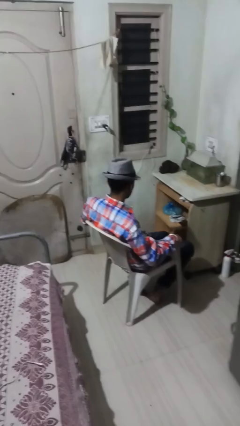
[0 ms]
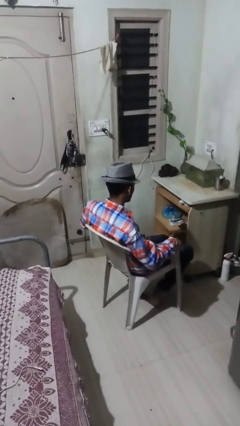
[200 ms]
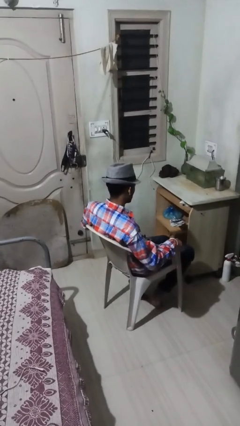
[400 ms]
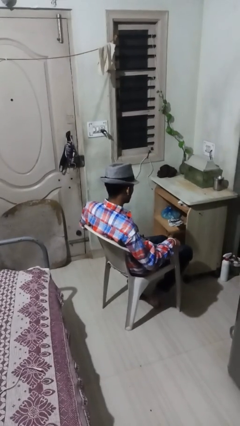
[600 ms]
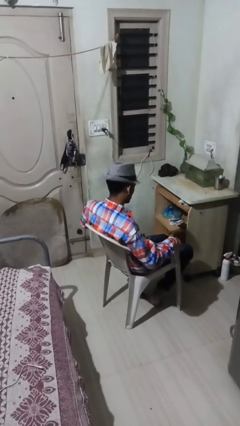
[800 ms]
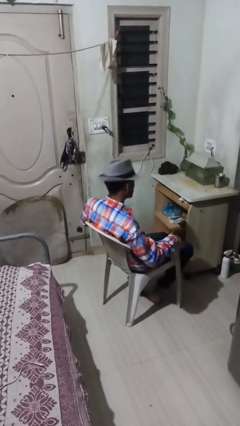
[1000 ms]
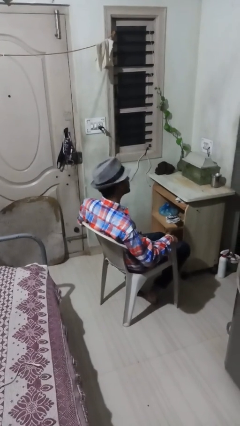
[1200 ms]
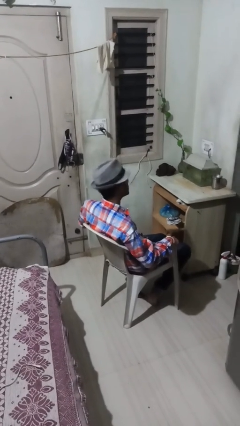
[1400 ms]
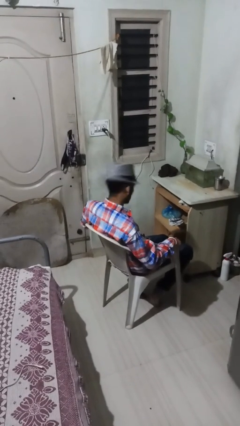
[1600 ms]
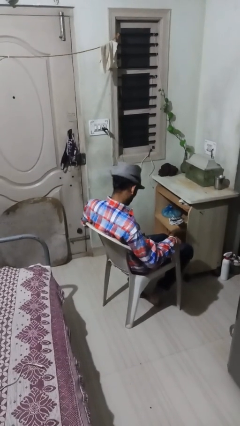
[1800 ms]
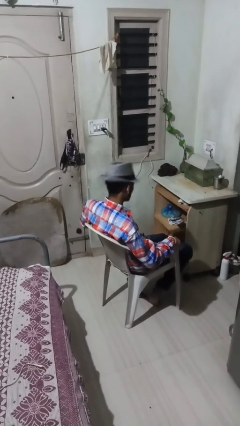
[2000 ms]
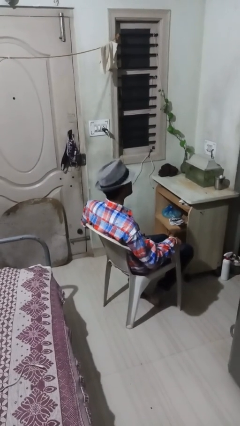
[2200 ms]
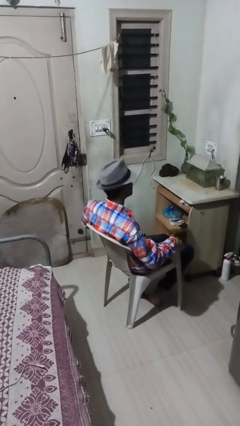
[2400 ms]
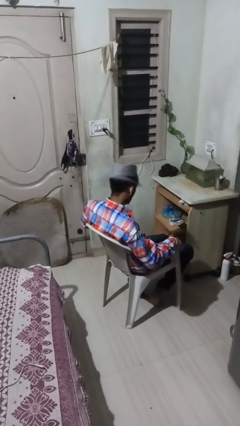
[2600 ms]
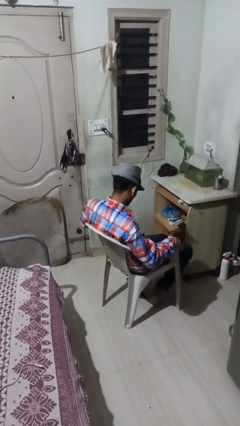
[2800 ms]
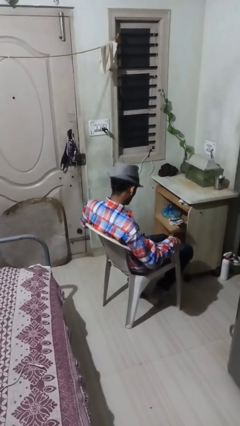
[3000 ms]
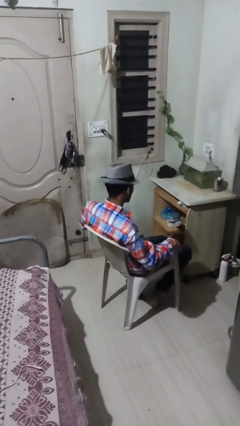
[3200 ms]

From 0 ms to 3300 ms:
person nods head

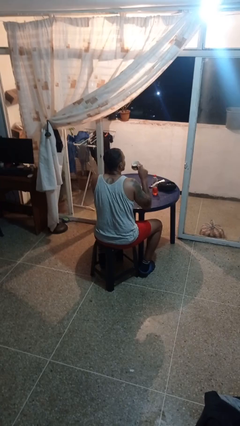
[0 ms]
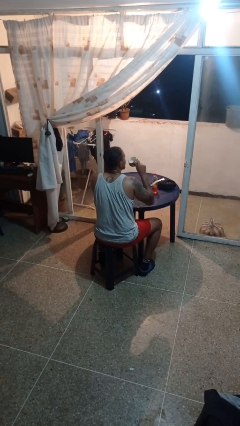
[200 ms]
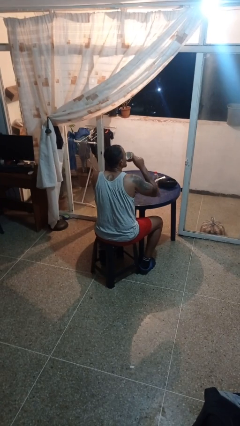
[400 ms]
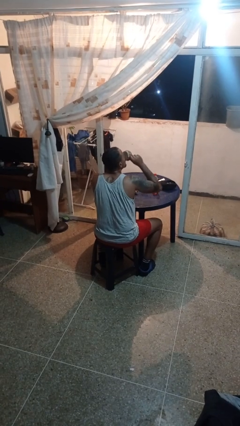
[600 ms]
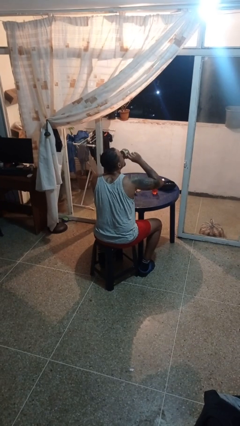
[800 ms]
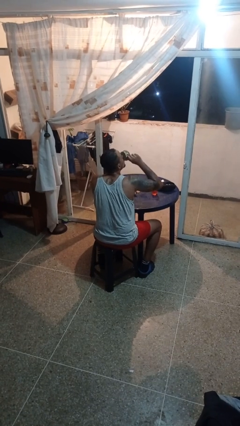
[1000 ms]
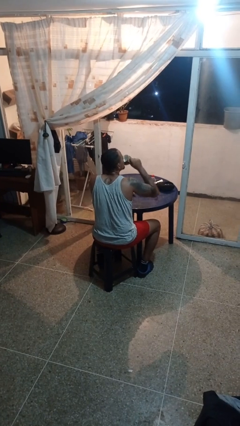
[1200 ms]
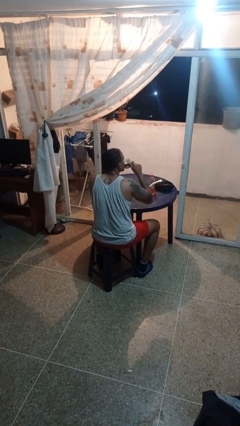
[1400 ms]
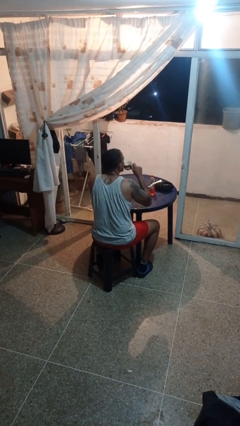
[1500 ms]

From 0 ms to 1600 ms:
person drinks from mug

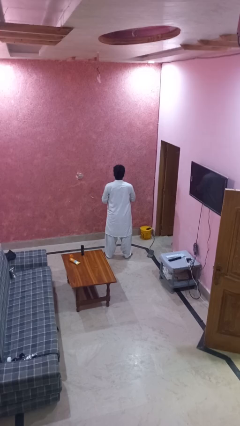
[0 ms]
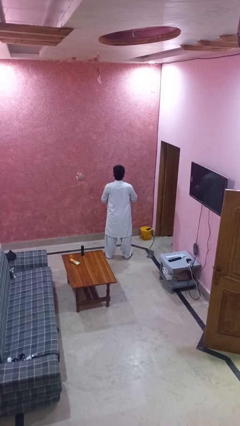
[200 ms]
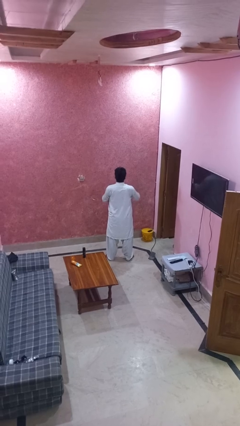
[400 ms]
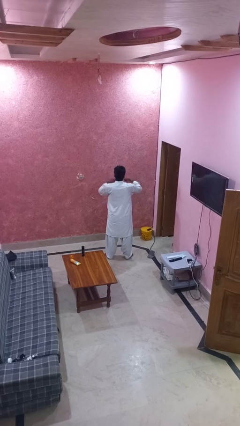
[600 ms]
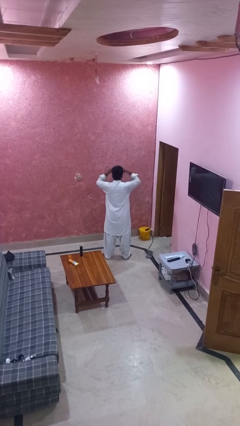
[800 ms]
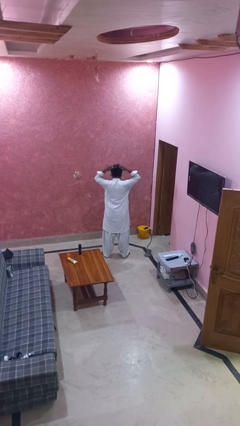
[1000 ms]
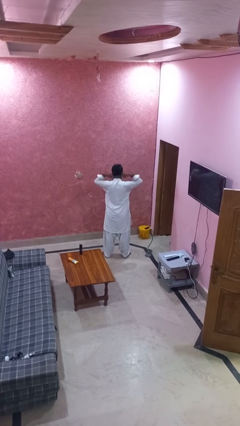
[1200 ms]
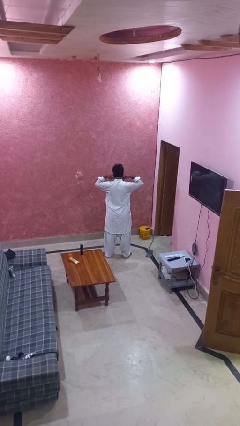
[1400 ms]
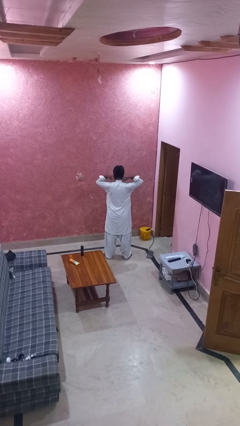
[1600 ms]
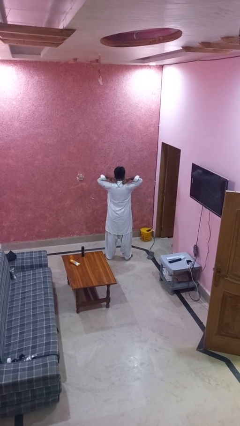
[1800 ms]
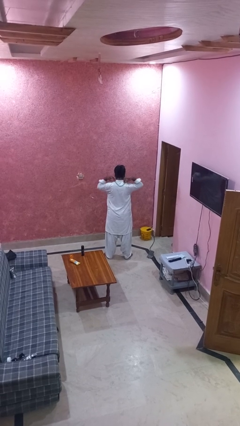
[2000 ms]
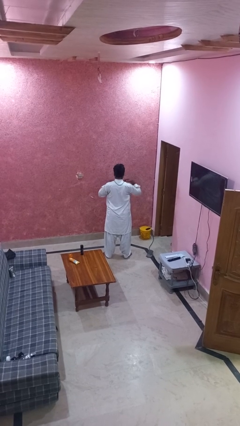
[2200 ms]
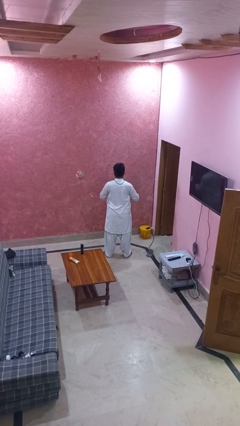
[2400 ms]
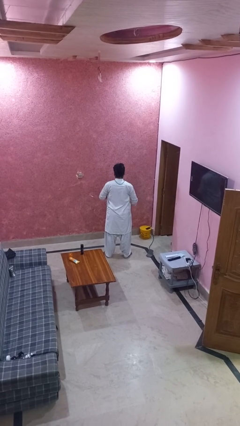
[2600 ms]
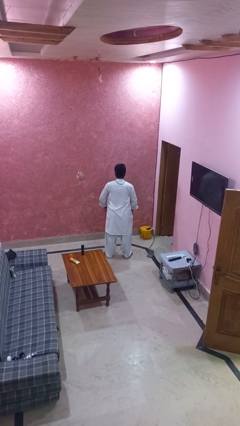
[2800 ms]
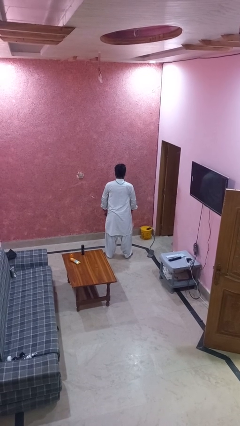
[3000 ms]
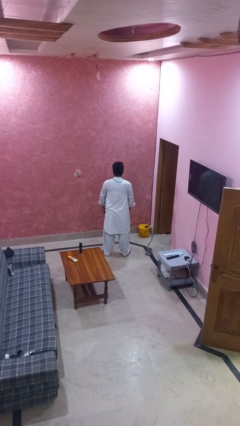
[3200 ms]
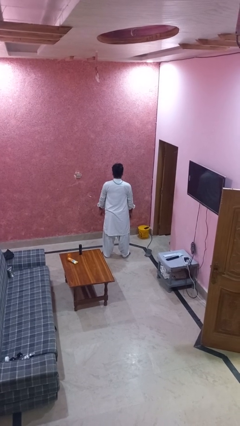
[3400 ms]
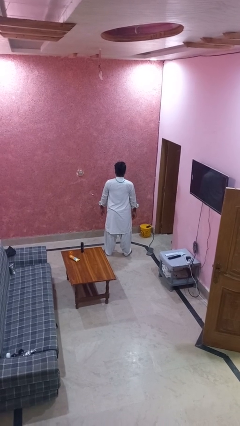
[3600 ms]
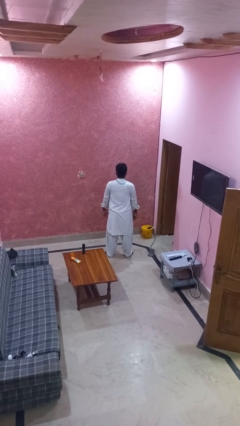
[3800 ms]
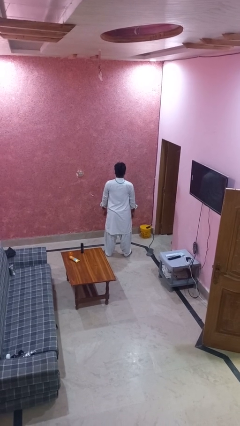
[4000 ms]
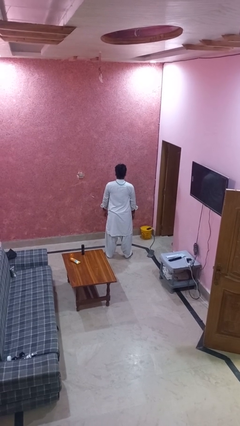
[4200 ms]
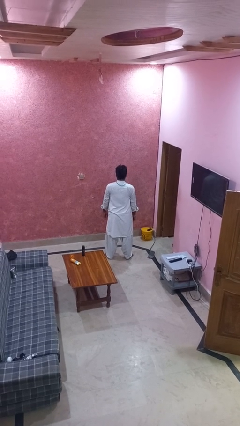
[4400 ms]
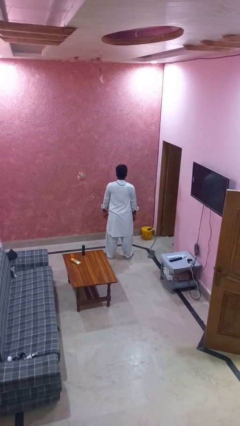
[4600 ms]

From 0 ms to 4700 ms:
person puts on necklace

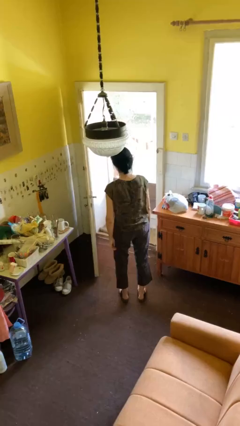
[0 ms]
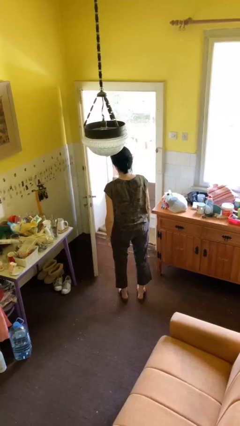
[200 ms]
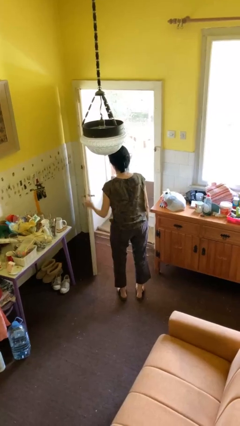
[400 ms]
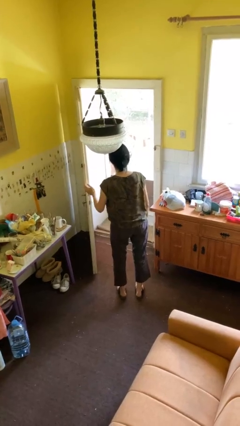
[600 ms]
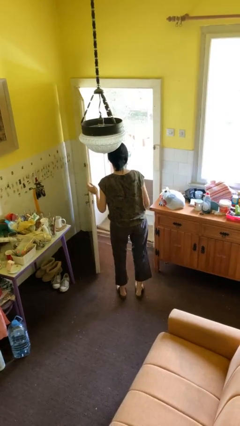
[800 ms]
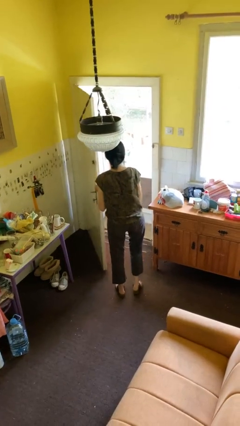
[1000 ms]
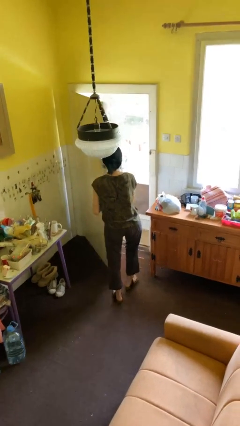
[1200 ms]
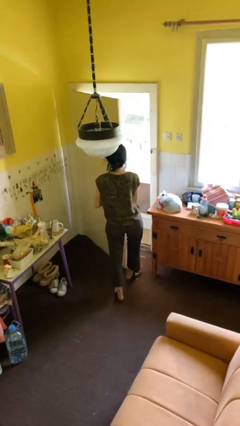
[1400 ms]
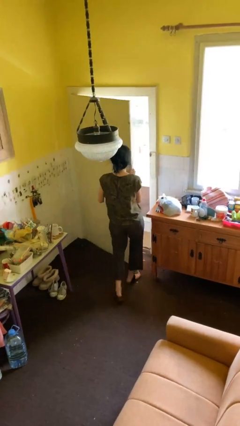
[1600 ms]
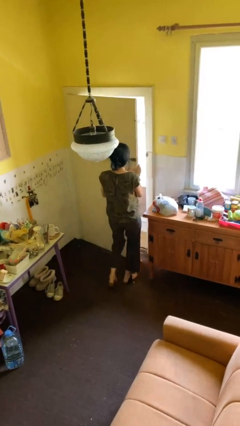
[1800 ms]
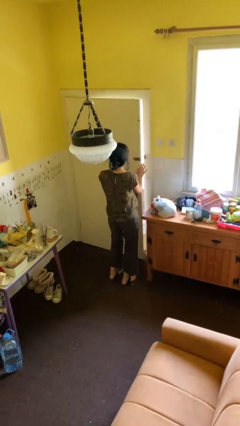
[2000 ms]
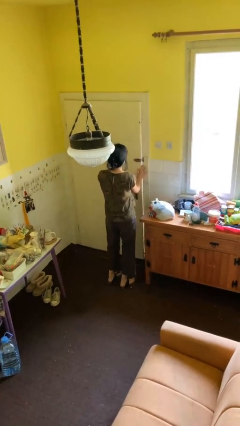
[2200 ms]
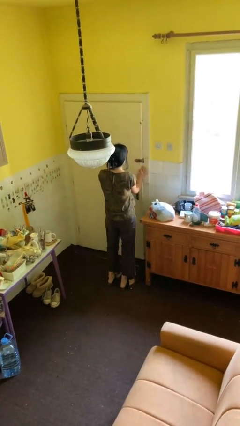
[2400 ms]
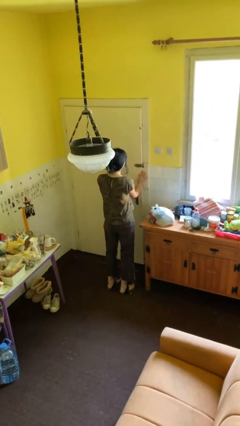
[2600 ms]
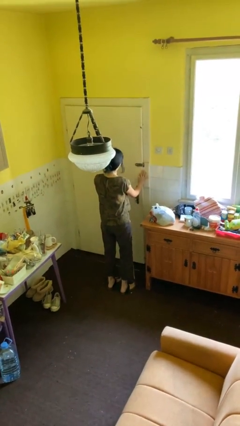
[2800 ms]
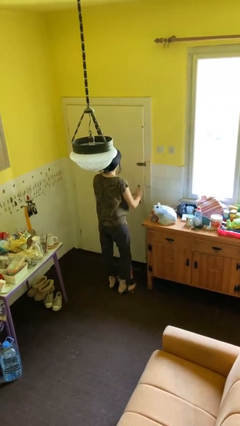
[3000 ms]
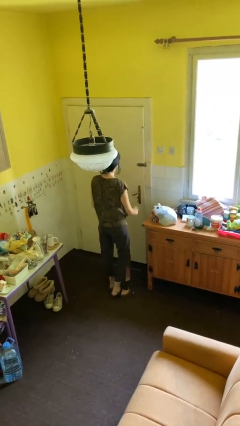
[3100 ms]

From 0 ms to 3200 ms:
person closes facility door

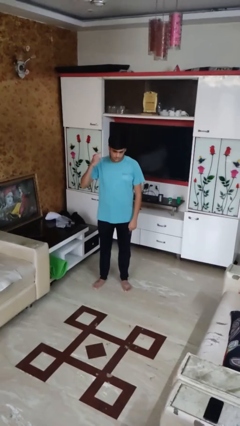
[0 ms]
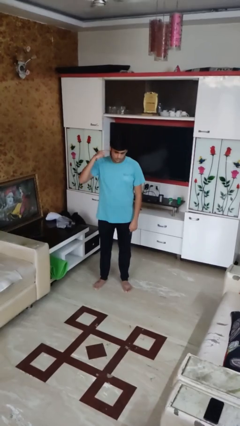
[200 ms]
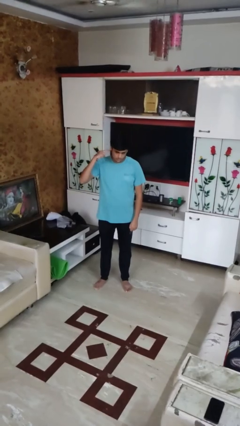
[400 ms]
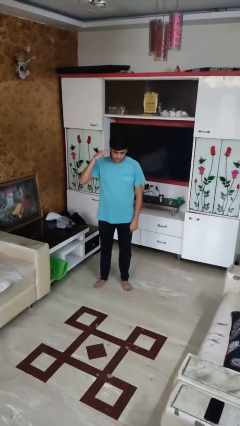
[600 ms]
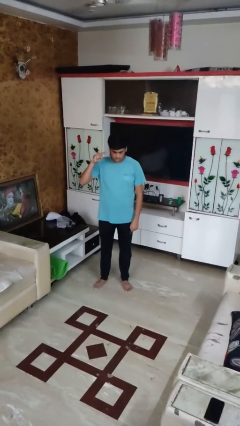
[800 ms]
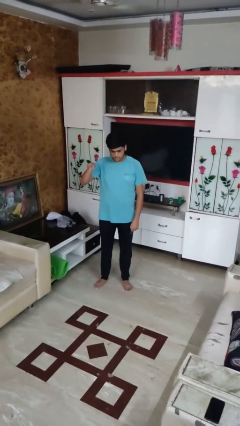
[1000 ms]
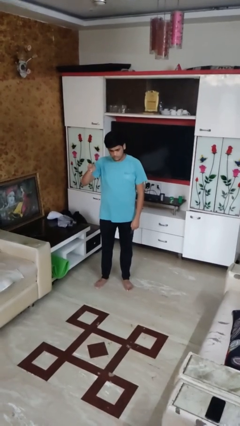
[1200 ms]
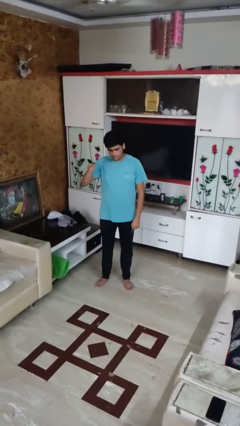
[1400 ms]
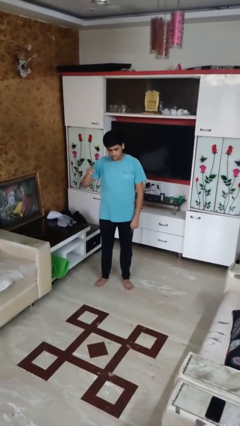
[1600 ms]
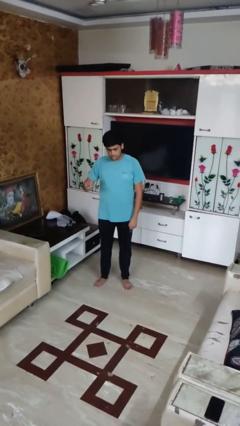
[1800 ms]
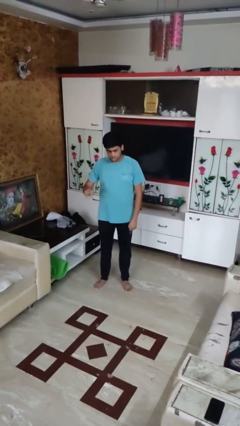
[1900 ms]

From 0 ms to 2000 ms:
person gestures listen closely

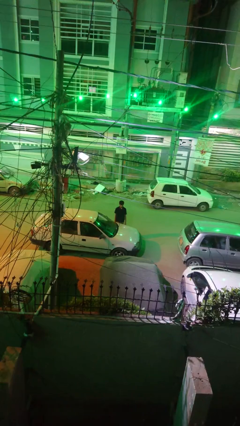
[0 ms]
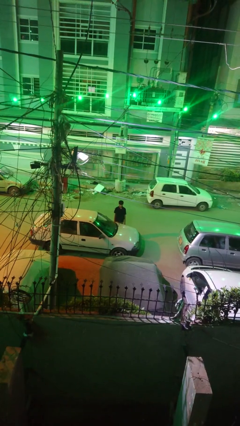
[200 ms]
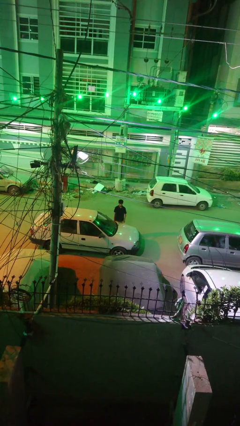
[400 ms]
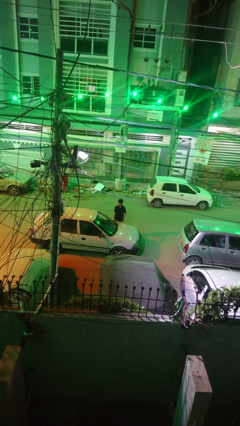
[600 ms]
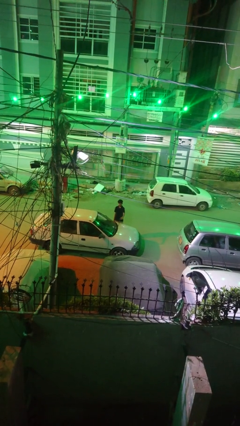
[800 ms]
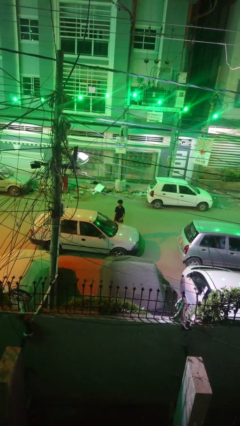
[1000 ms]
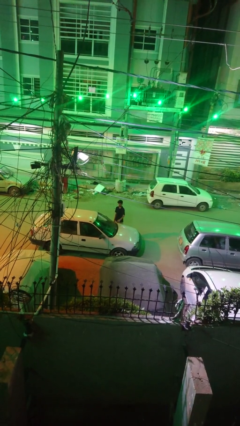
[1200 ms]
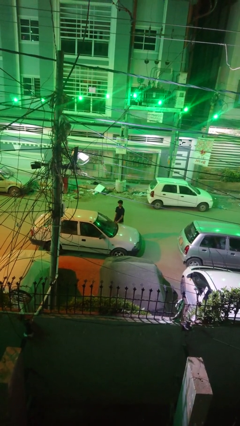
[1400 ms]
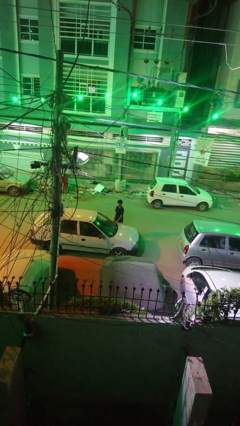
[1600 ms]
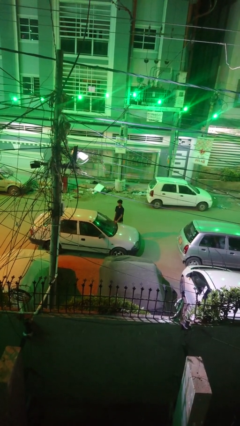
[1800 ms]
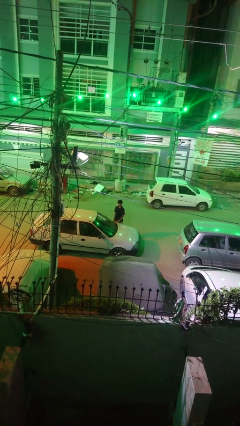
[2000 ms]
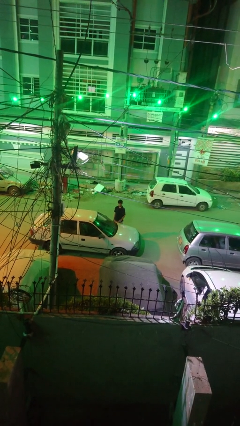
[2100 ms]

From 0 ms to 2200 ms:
person flips down car wipers

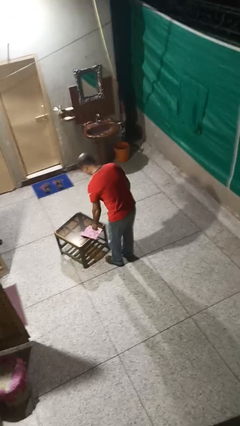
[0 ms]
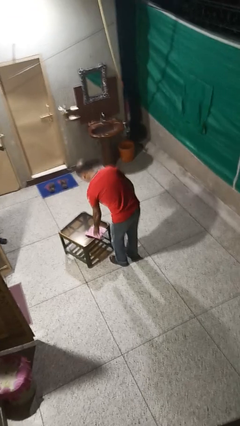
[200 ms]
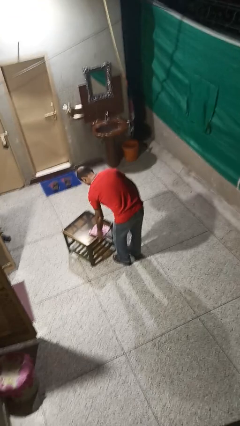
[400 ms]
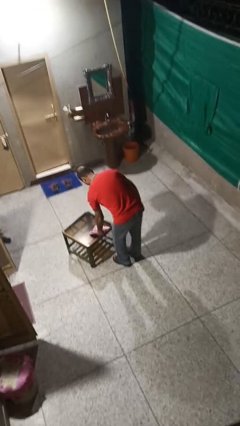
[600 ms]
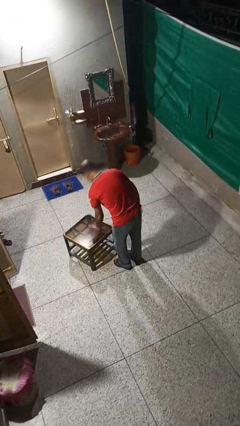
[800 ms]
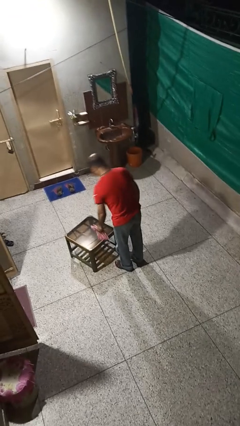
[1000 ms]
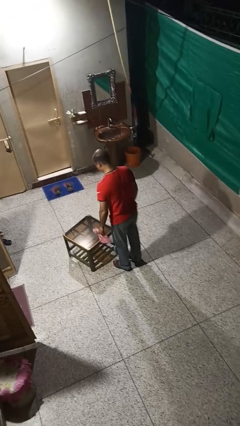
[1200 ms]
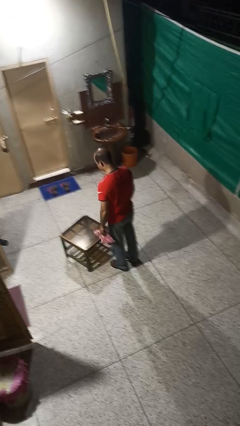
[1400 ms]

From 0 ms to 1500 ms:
person picks up object from table
